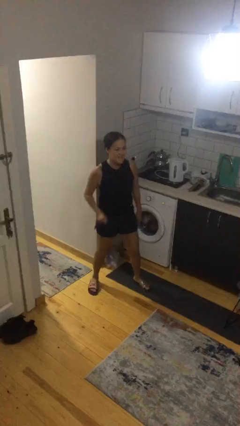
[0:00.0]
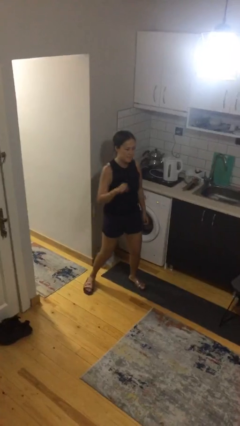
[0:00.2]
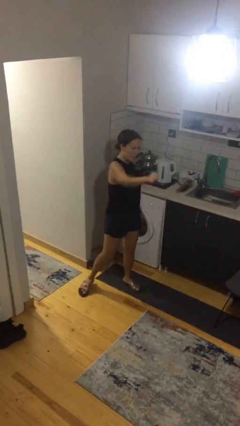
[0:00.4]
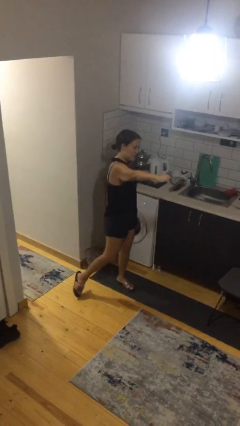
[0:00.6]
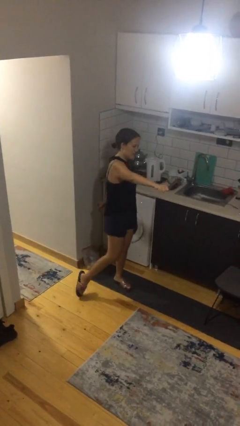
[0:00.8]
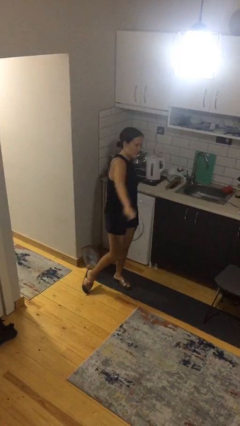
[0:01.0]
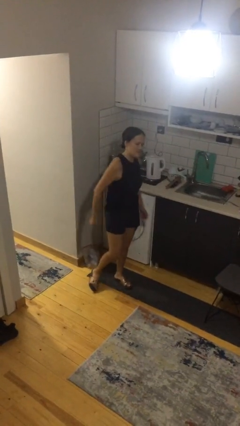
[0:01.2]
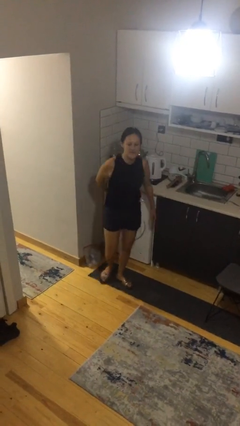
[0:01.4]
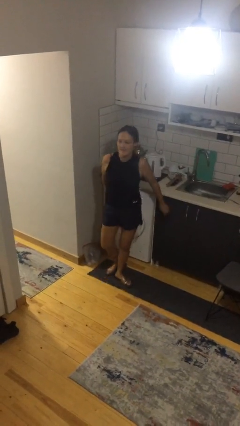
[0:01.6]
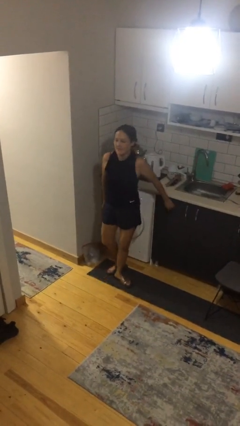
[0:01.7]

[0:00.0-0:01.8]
person punches

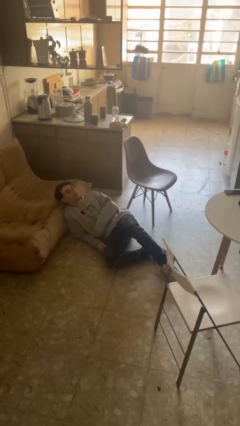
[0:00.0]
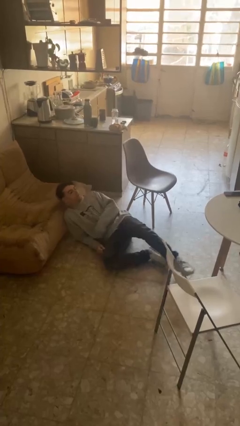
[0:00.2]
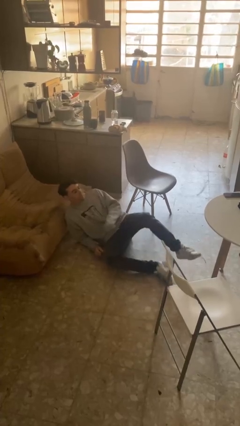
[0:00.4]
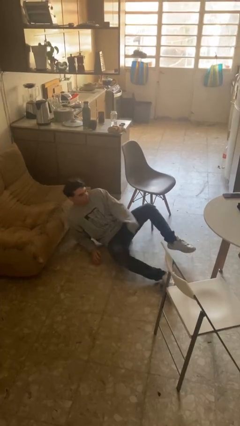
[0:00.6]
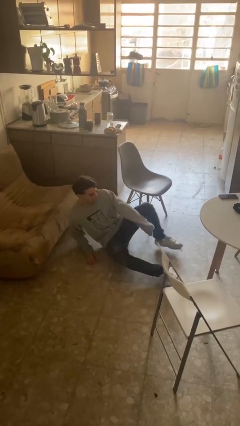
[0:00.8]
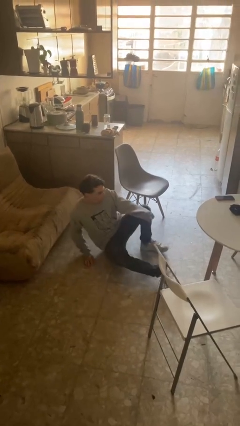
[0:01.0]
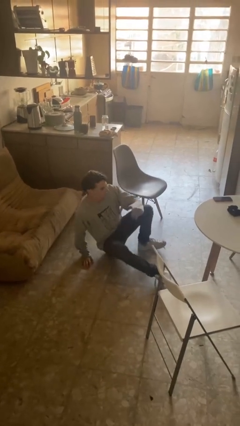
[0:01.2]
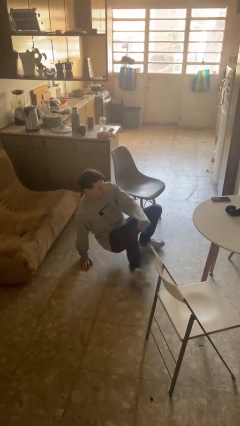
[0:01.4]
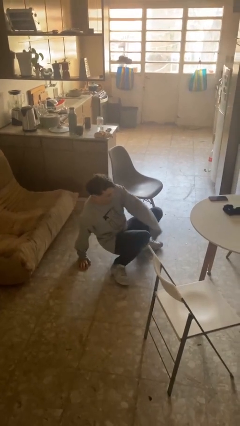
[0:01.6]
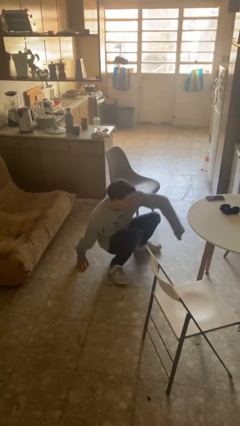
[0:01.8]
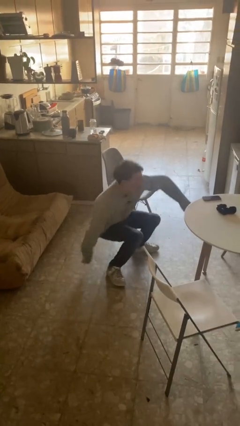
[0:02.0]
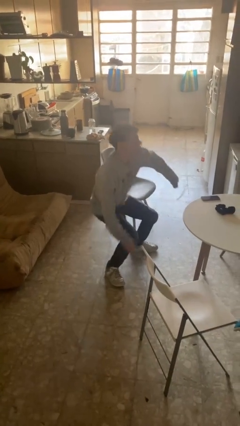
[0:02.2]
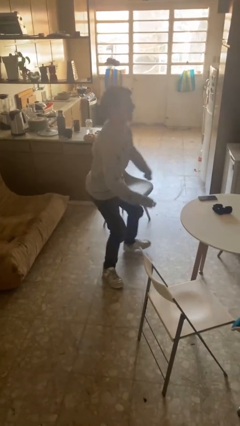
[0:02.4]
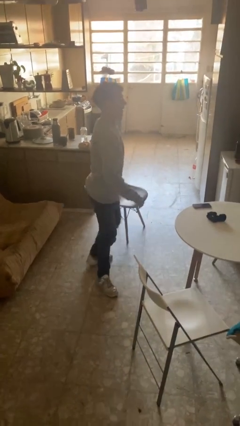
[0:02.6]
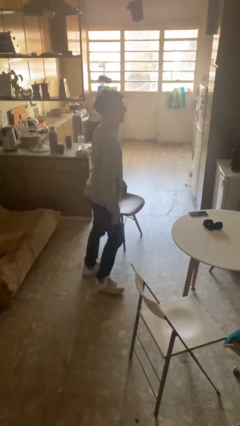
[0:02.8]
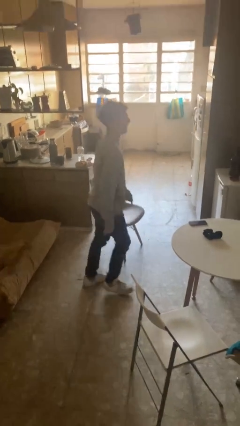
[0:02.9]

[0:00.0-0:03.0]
person stands up from floor

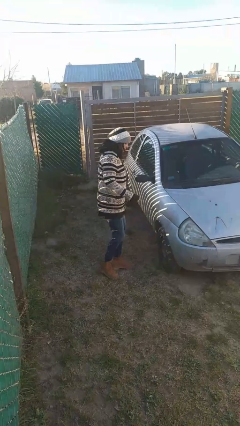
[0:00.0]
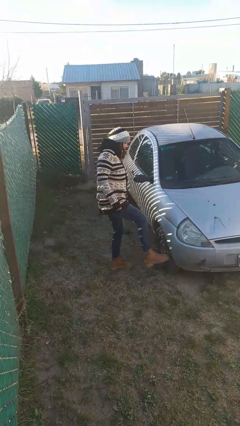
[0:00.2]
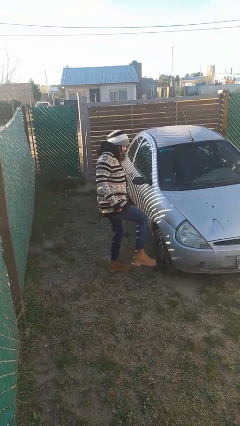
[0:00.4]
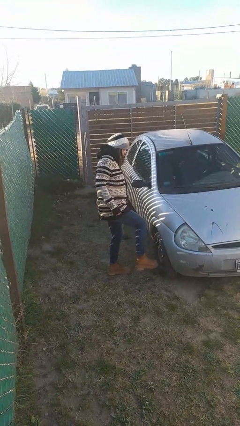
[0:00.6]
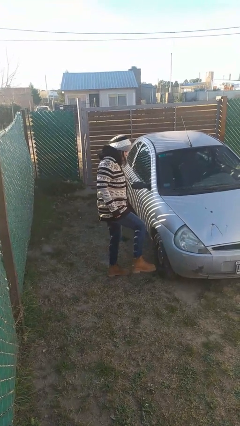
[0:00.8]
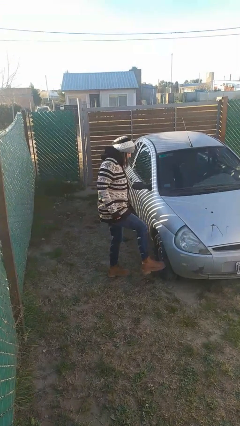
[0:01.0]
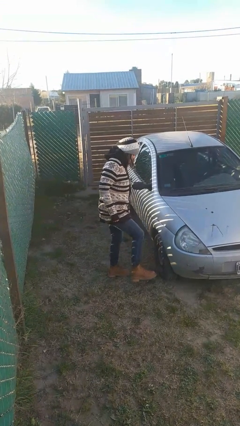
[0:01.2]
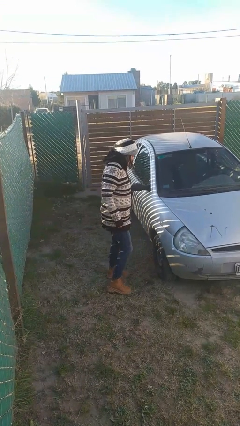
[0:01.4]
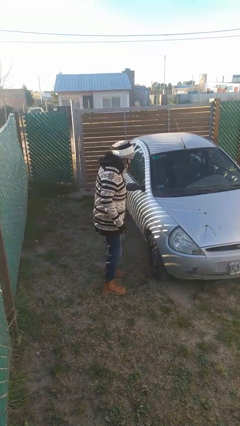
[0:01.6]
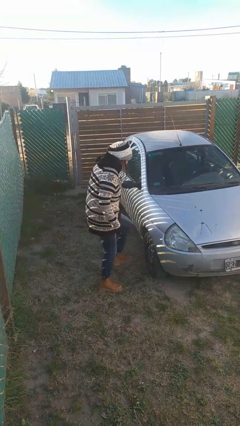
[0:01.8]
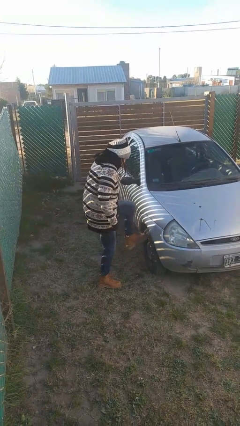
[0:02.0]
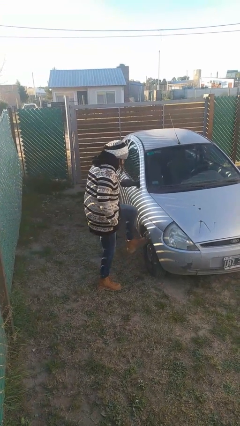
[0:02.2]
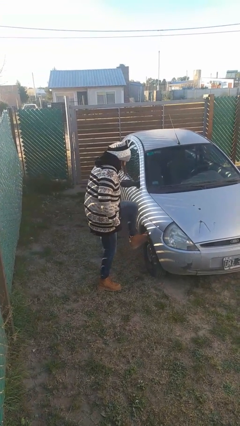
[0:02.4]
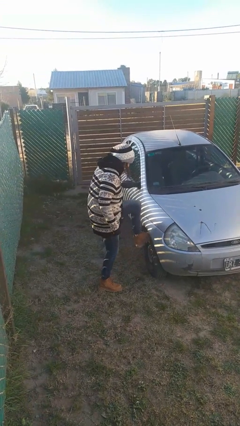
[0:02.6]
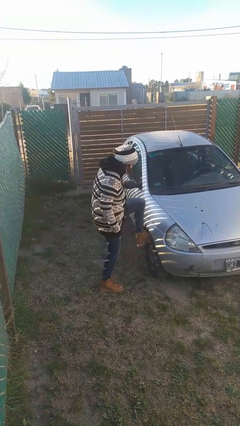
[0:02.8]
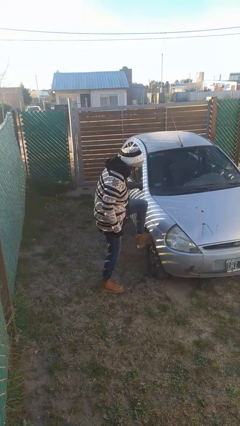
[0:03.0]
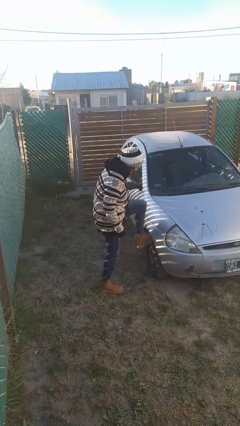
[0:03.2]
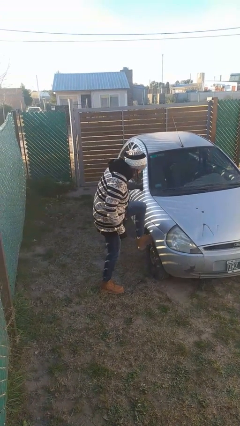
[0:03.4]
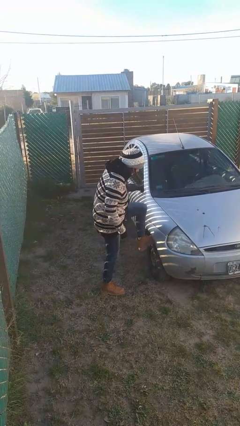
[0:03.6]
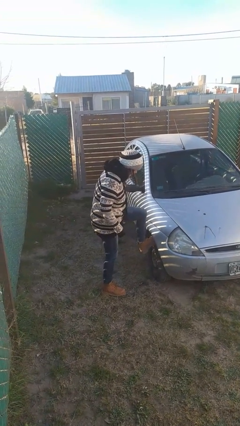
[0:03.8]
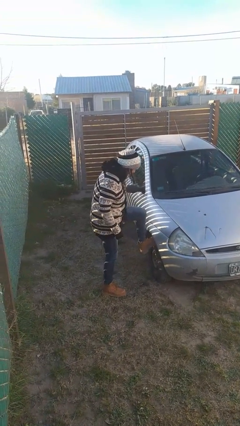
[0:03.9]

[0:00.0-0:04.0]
person kicks car tires

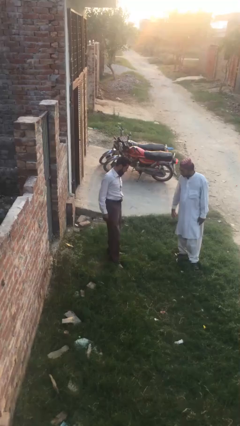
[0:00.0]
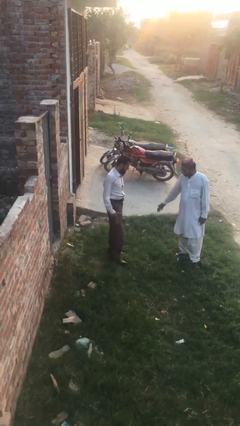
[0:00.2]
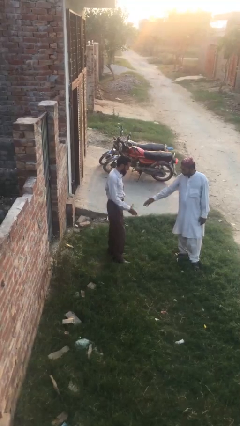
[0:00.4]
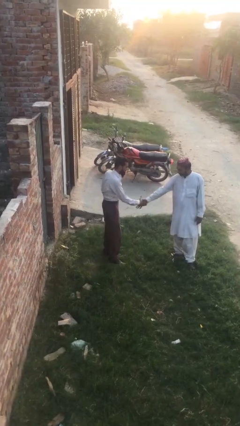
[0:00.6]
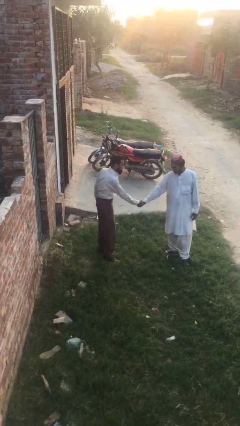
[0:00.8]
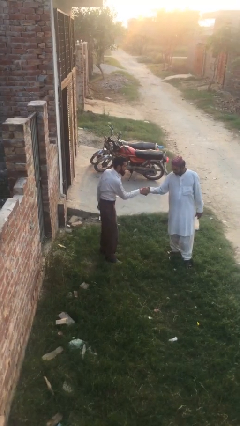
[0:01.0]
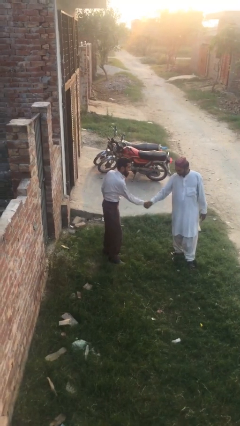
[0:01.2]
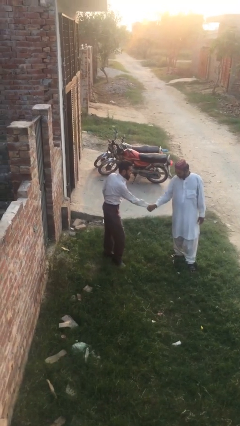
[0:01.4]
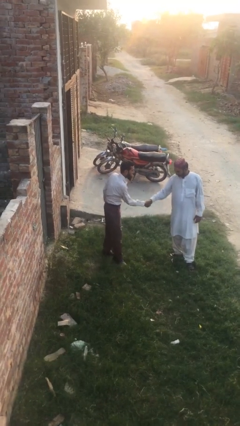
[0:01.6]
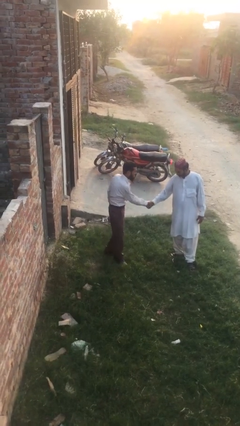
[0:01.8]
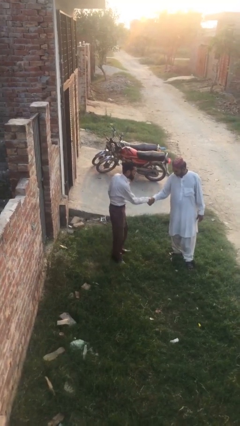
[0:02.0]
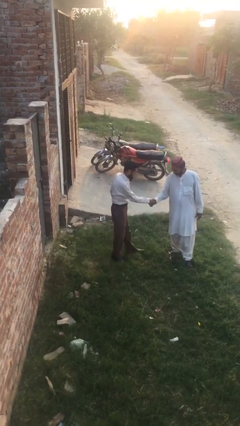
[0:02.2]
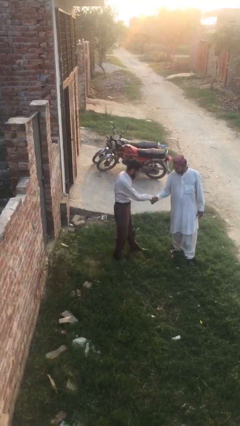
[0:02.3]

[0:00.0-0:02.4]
person shakes hand

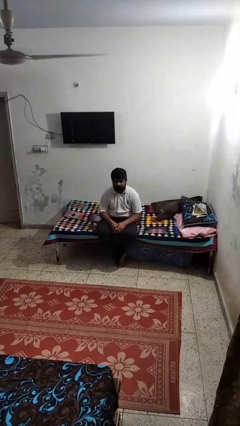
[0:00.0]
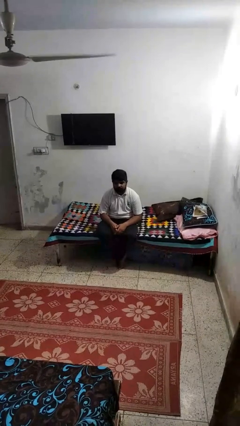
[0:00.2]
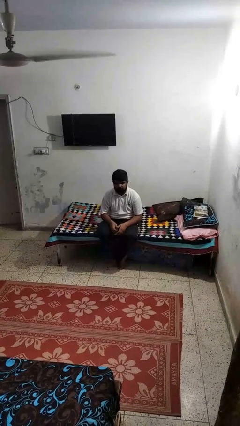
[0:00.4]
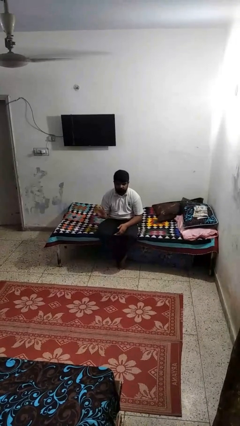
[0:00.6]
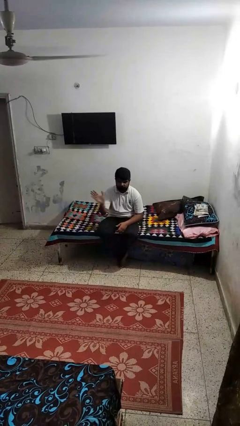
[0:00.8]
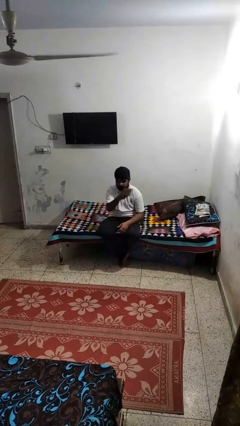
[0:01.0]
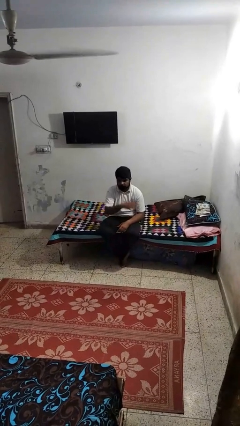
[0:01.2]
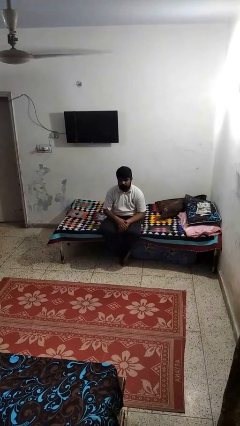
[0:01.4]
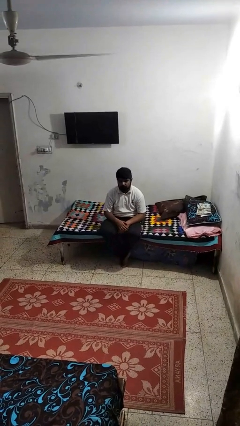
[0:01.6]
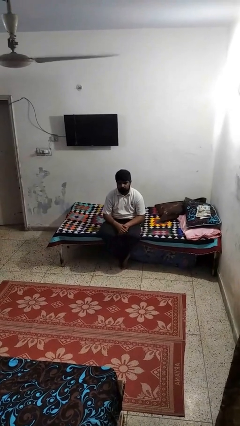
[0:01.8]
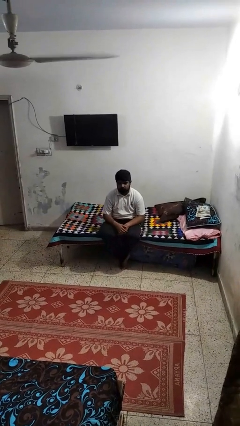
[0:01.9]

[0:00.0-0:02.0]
person gestures swipe left

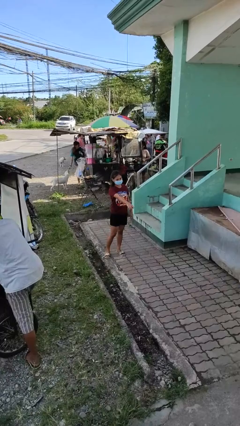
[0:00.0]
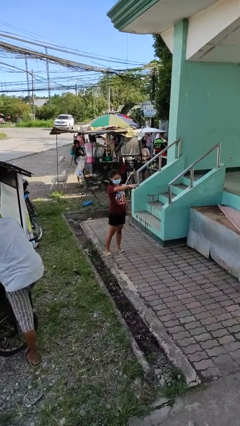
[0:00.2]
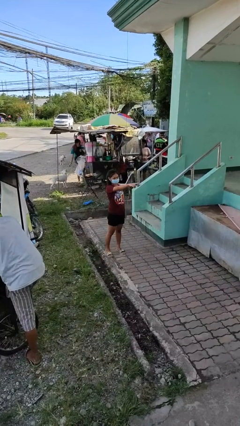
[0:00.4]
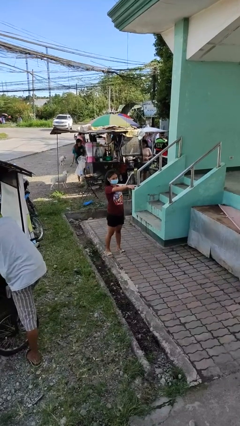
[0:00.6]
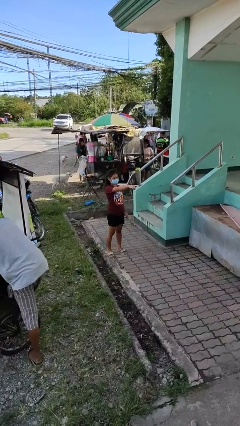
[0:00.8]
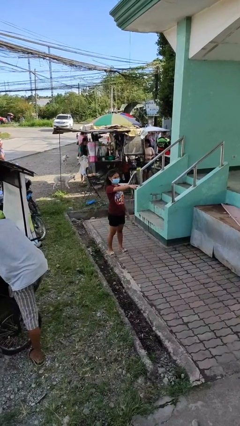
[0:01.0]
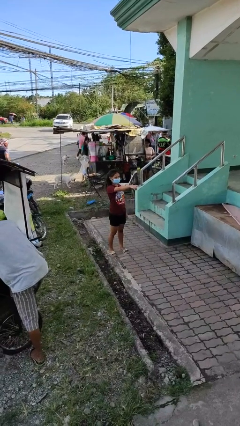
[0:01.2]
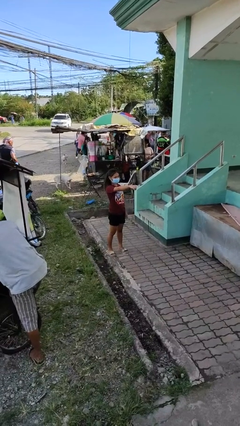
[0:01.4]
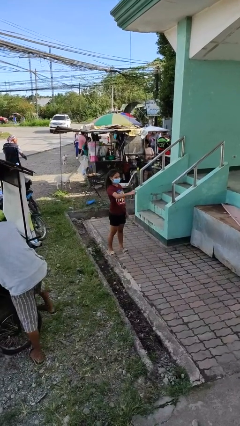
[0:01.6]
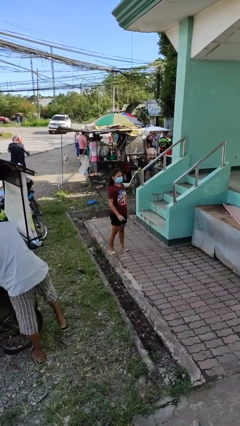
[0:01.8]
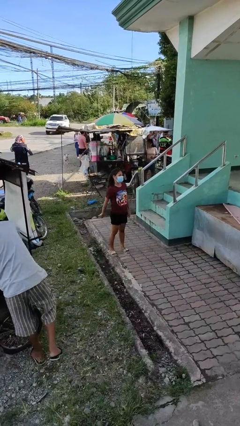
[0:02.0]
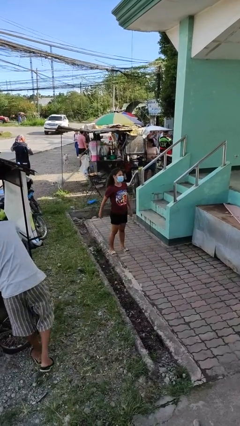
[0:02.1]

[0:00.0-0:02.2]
person points at person

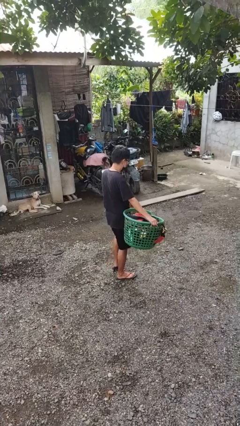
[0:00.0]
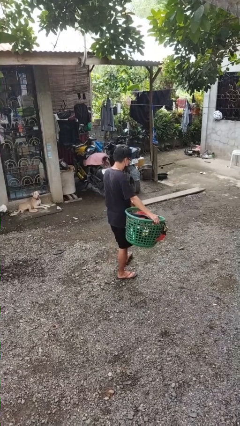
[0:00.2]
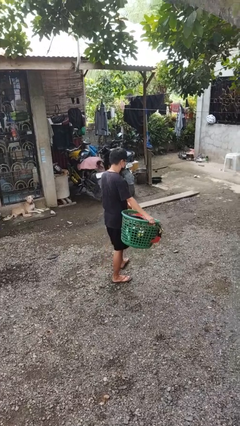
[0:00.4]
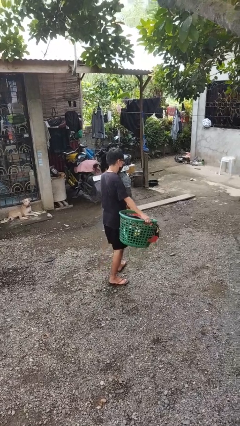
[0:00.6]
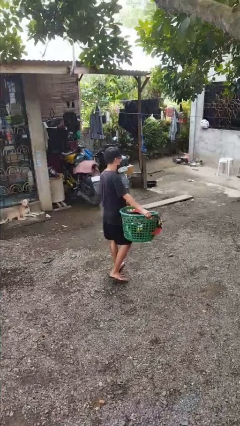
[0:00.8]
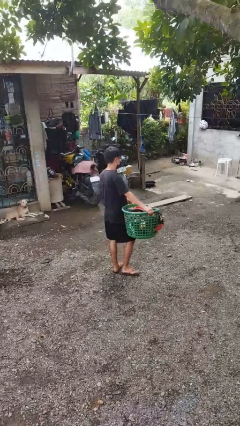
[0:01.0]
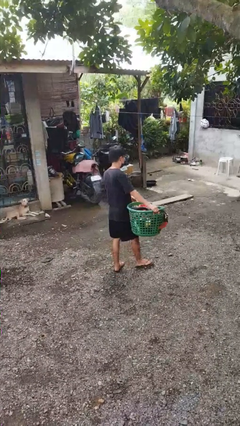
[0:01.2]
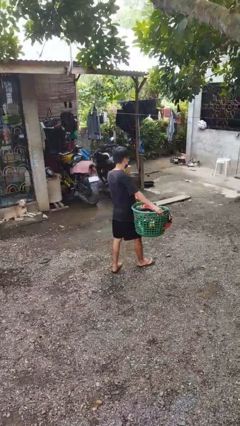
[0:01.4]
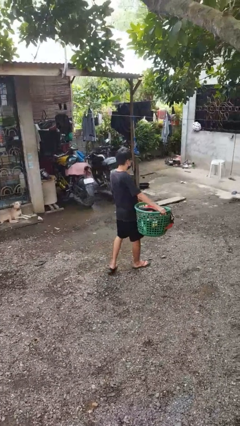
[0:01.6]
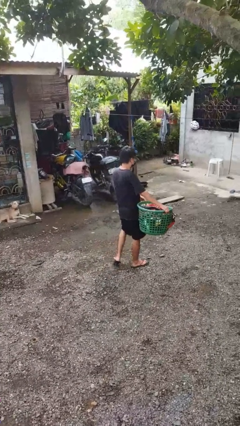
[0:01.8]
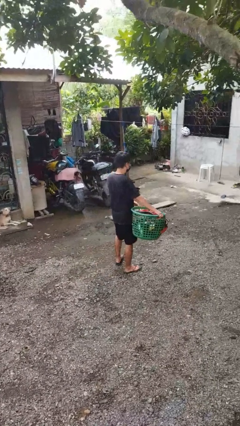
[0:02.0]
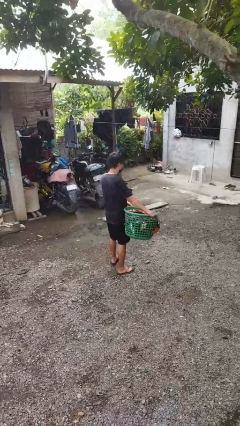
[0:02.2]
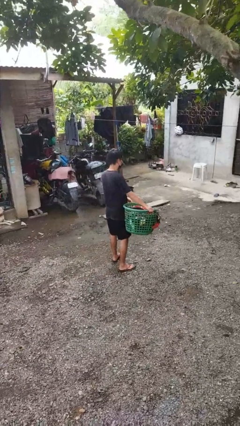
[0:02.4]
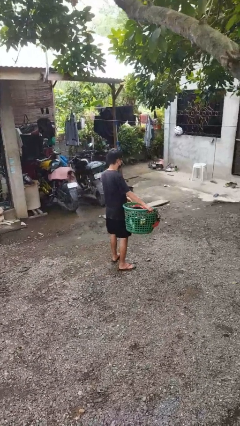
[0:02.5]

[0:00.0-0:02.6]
person carries laundry basket
